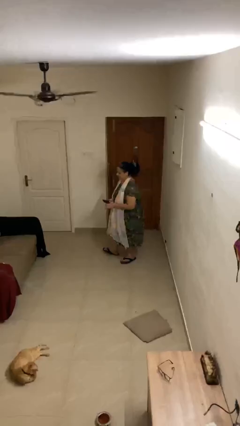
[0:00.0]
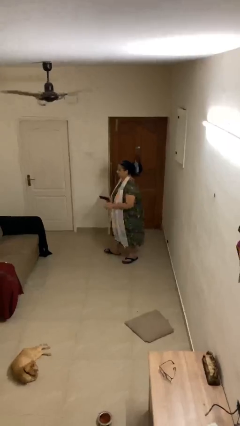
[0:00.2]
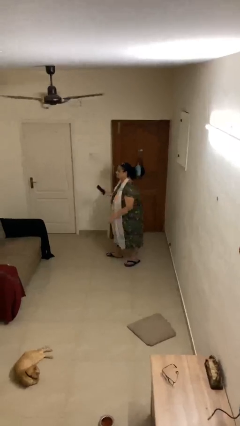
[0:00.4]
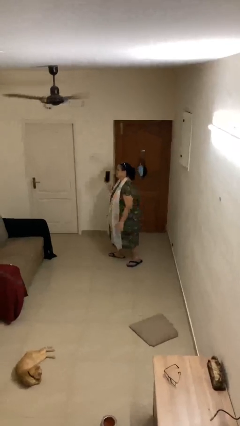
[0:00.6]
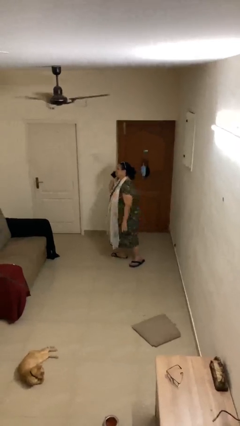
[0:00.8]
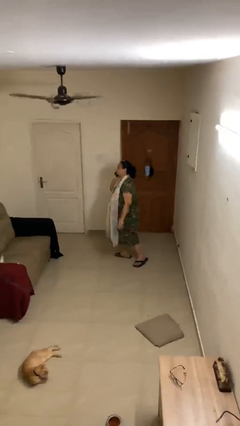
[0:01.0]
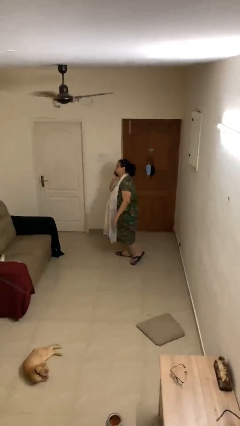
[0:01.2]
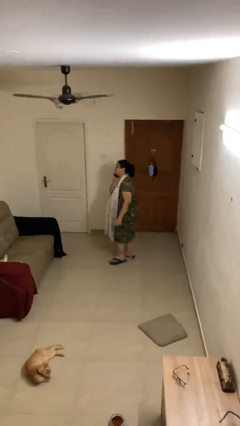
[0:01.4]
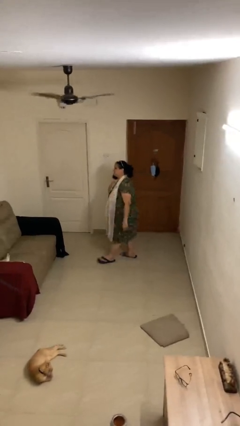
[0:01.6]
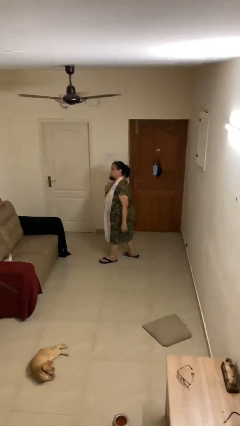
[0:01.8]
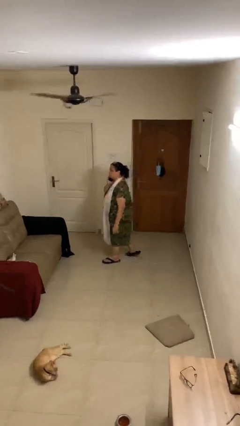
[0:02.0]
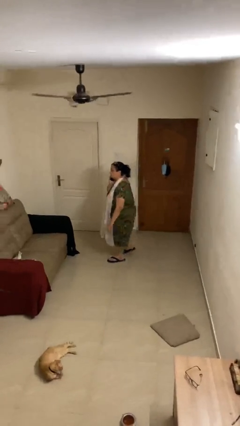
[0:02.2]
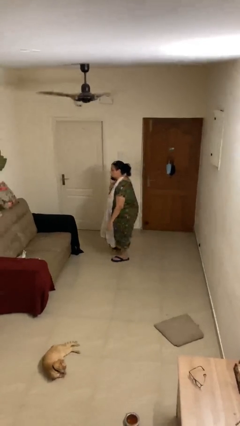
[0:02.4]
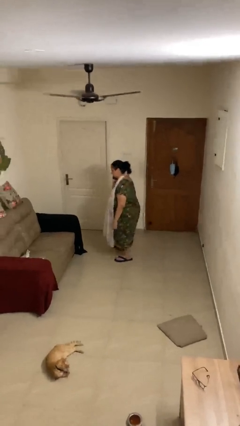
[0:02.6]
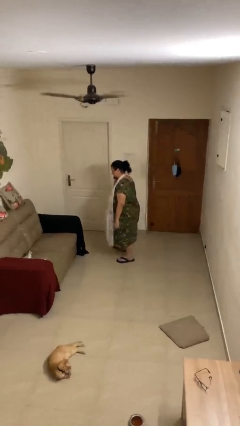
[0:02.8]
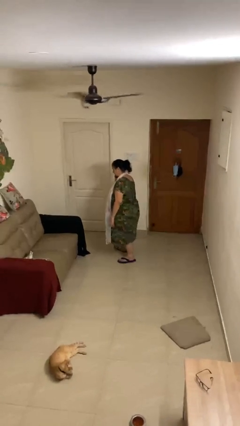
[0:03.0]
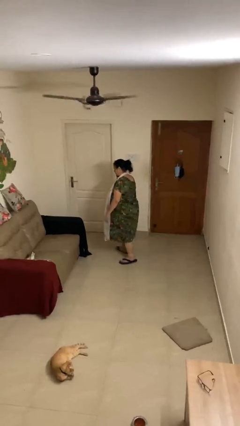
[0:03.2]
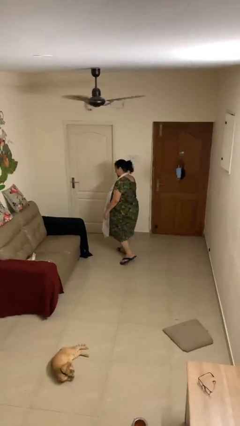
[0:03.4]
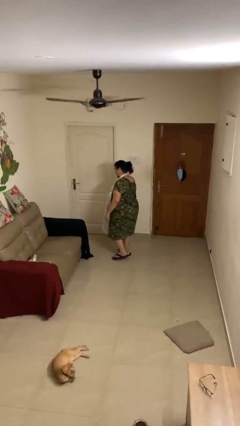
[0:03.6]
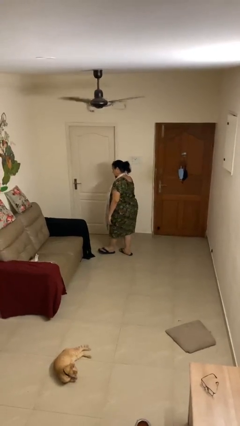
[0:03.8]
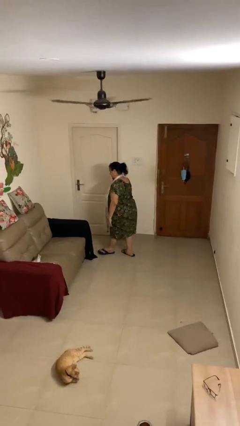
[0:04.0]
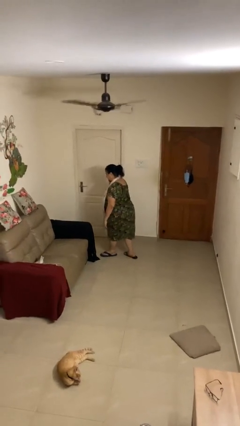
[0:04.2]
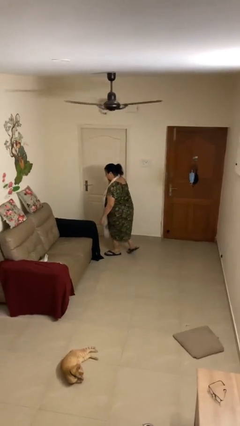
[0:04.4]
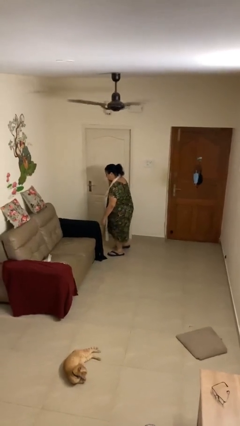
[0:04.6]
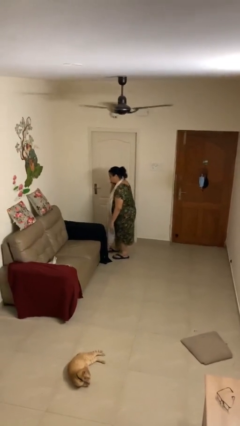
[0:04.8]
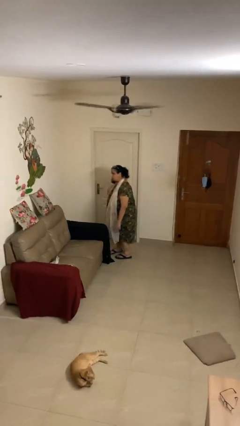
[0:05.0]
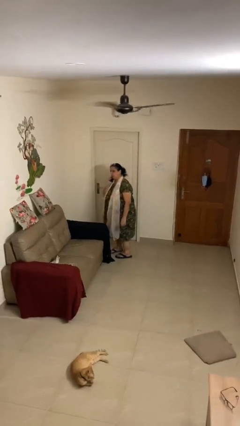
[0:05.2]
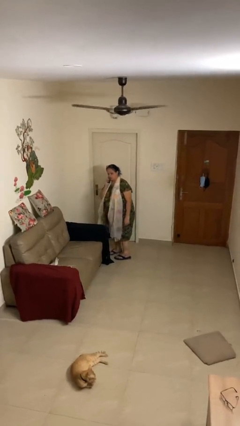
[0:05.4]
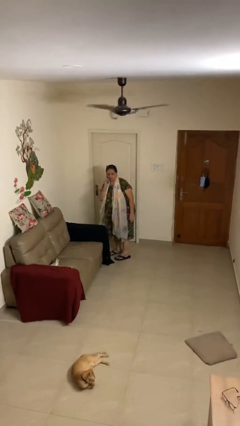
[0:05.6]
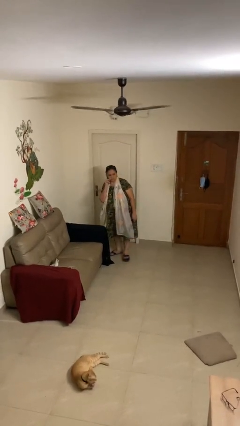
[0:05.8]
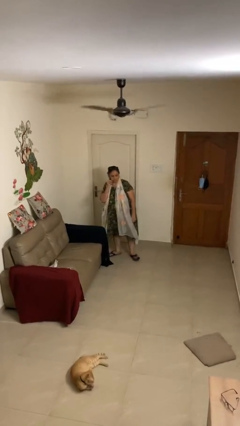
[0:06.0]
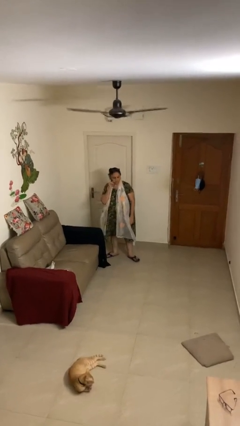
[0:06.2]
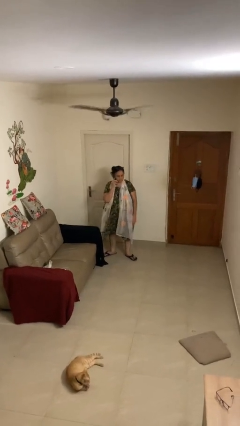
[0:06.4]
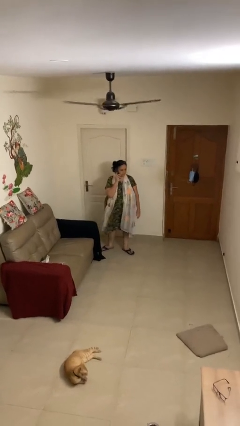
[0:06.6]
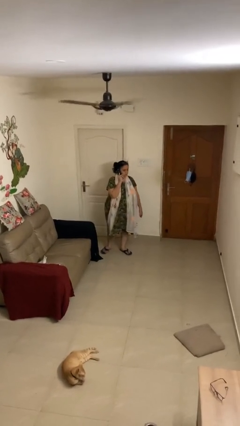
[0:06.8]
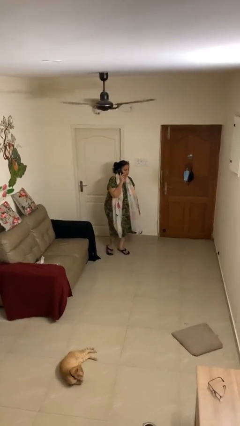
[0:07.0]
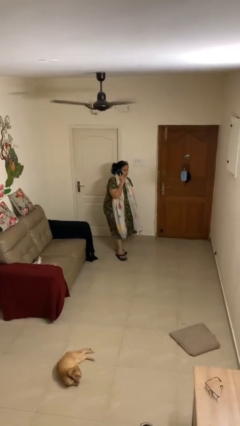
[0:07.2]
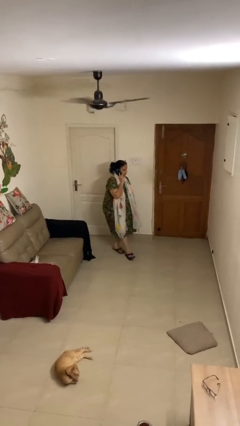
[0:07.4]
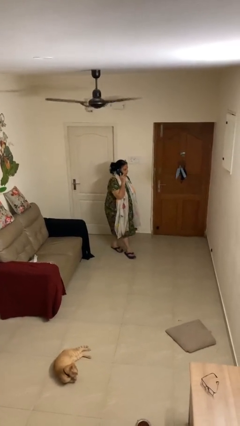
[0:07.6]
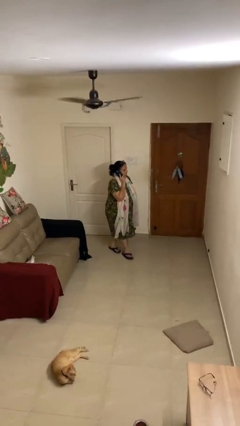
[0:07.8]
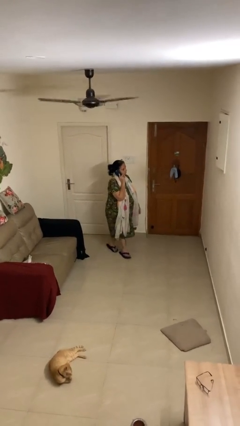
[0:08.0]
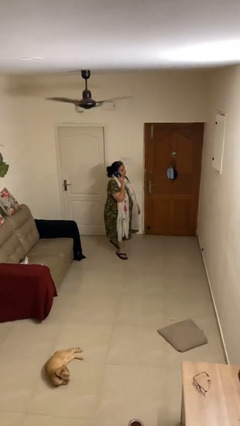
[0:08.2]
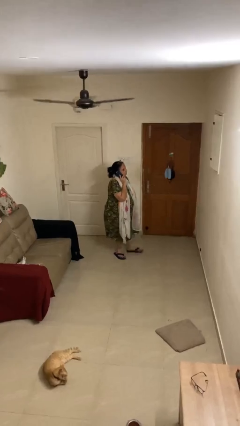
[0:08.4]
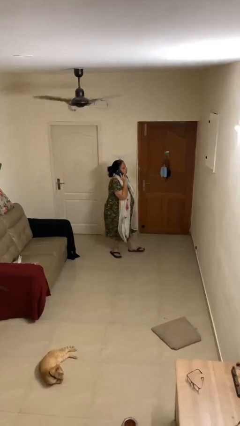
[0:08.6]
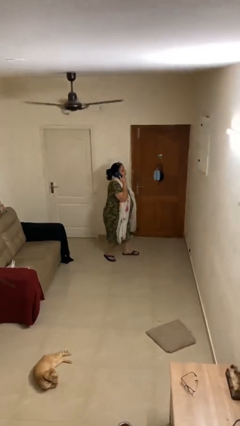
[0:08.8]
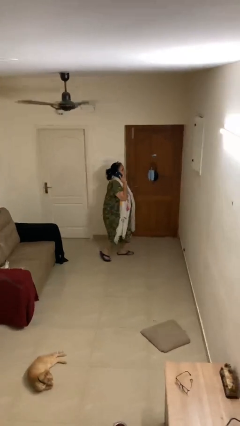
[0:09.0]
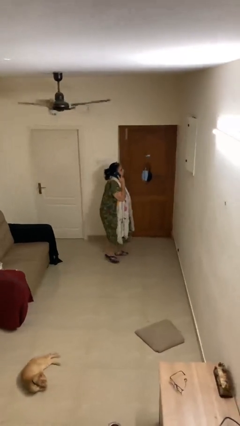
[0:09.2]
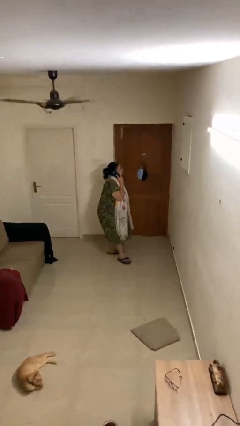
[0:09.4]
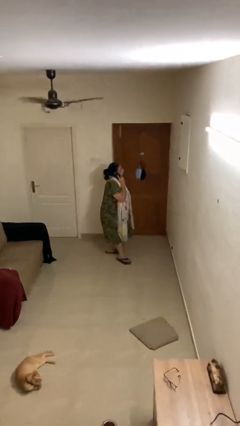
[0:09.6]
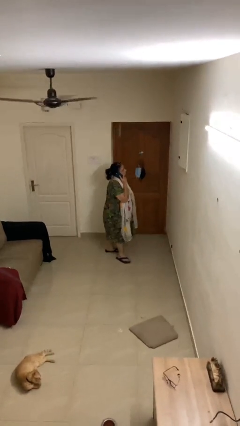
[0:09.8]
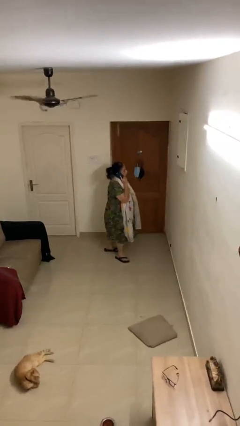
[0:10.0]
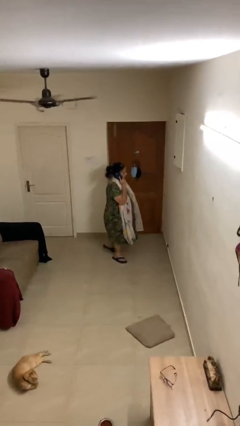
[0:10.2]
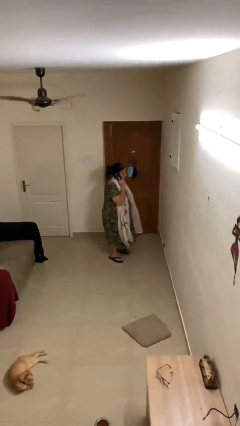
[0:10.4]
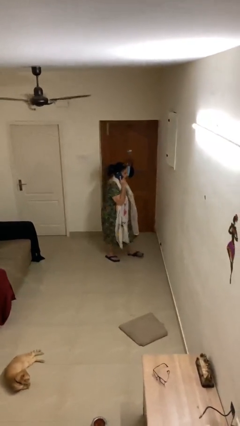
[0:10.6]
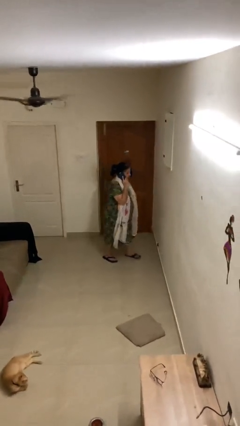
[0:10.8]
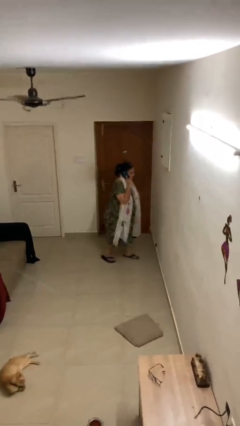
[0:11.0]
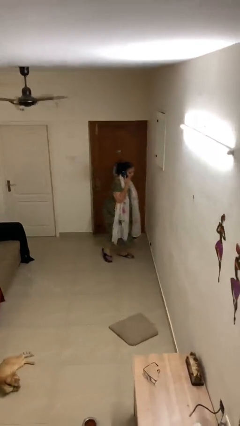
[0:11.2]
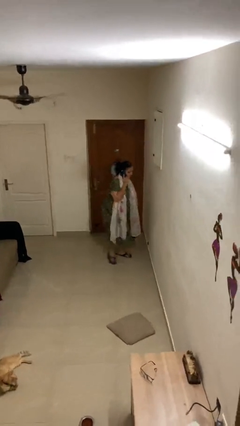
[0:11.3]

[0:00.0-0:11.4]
person talks on phone

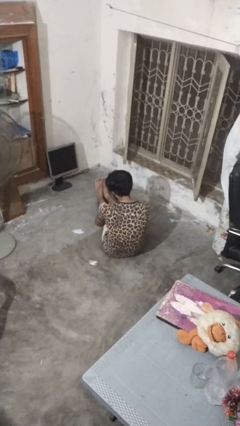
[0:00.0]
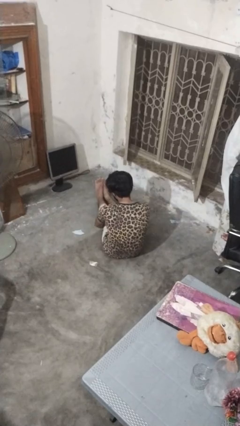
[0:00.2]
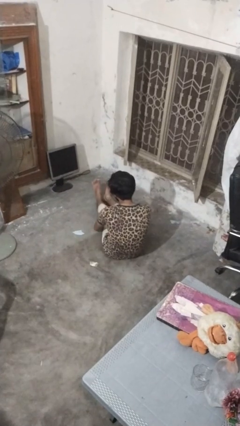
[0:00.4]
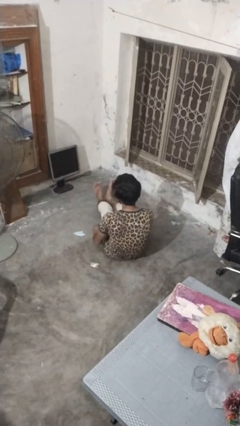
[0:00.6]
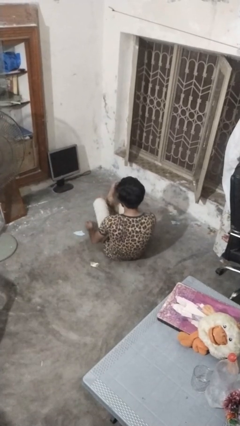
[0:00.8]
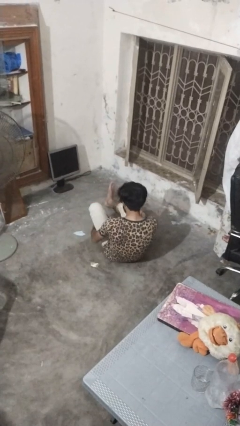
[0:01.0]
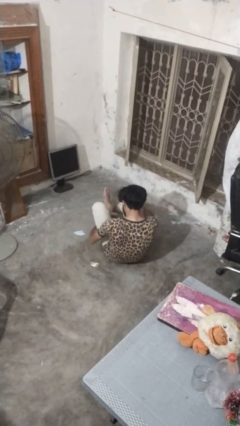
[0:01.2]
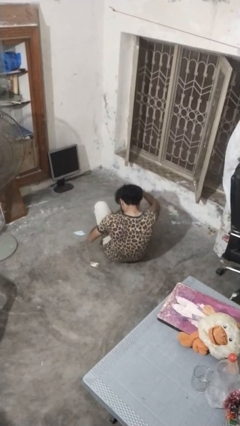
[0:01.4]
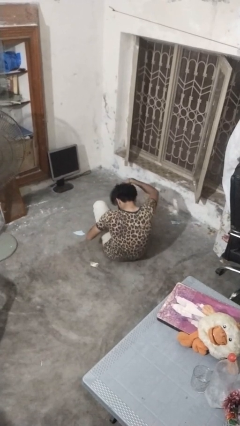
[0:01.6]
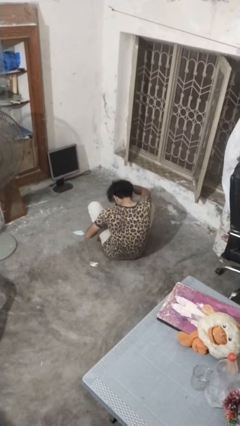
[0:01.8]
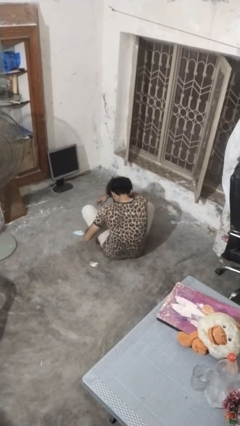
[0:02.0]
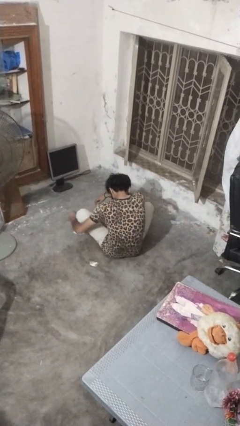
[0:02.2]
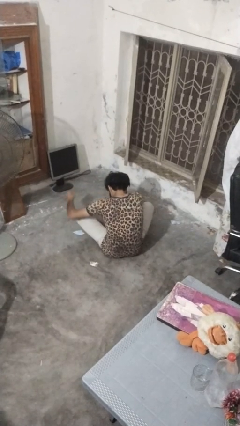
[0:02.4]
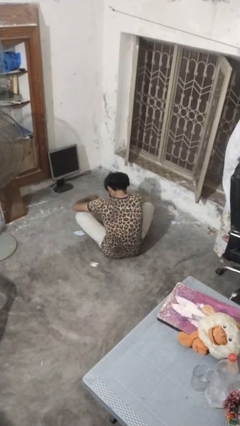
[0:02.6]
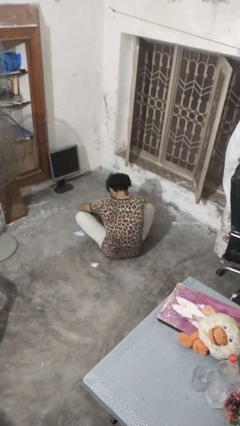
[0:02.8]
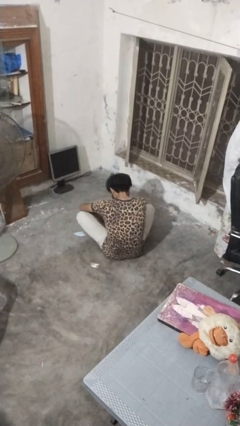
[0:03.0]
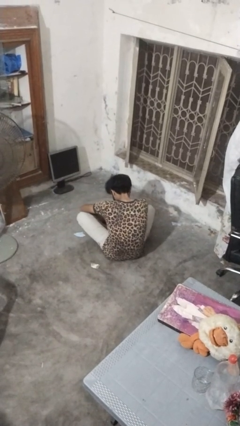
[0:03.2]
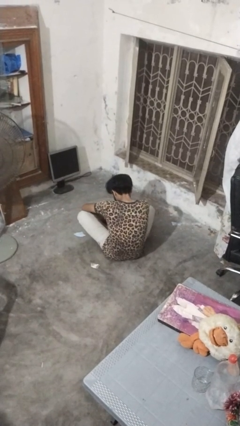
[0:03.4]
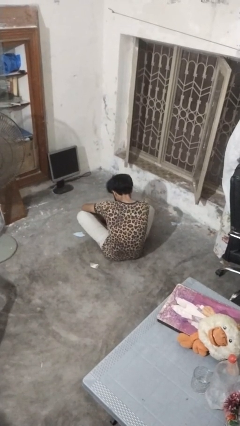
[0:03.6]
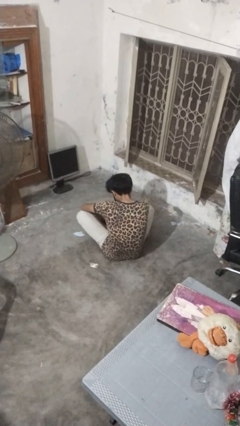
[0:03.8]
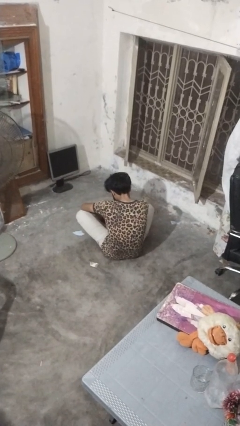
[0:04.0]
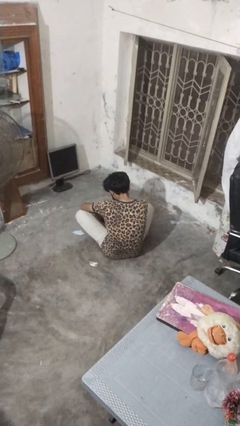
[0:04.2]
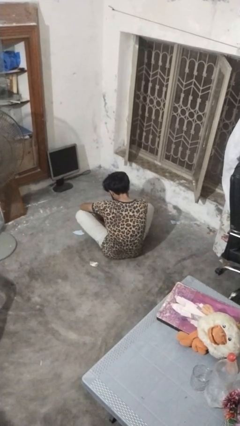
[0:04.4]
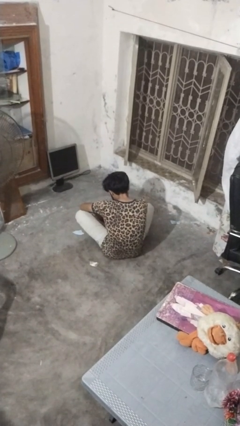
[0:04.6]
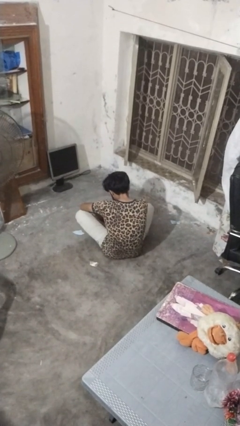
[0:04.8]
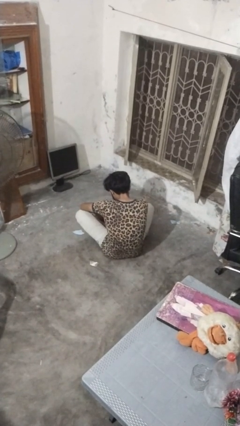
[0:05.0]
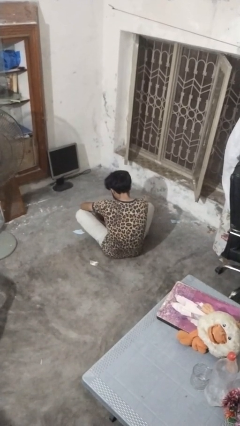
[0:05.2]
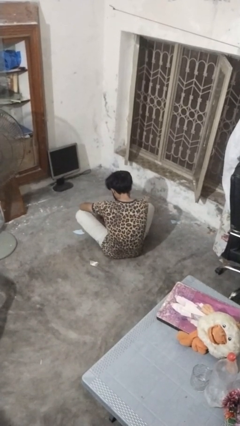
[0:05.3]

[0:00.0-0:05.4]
person crosses legs

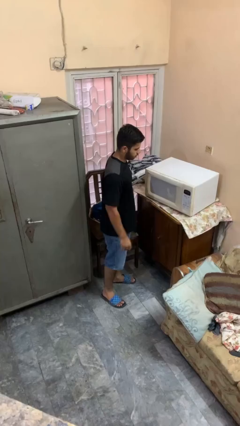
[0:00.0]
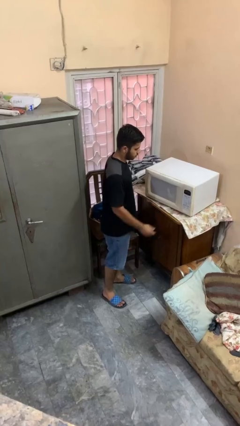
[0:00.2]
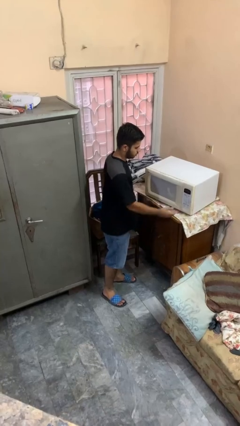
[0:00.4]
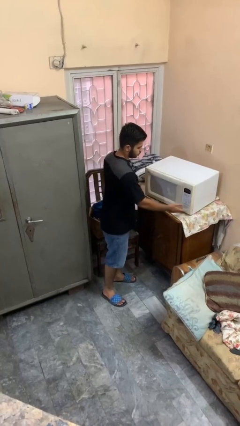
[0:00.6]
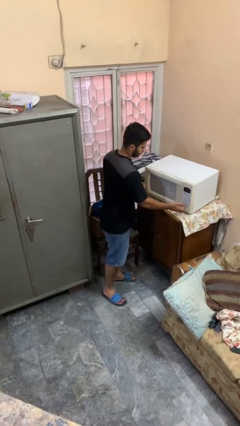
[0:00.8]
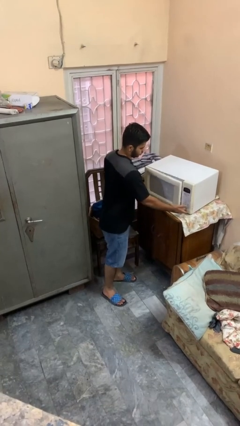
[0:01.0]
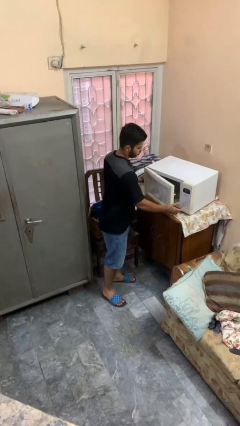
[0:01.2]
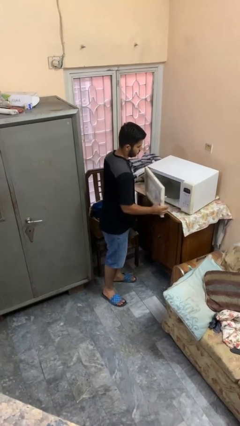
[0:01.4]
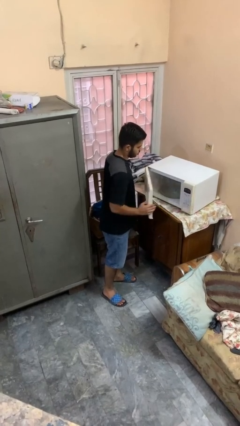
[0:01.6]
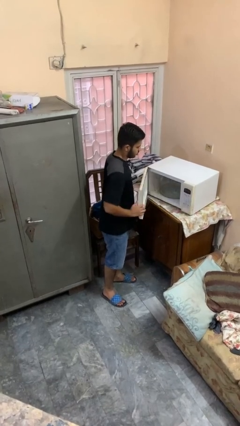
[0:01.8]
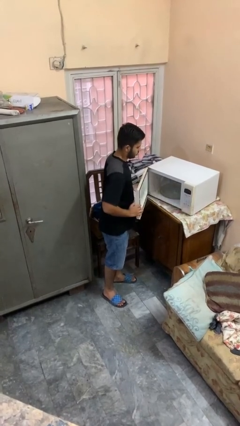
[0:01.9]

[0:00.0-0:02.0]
person opens microwave
